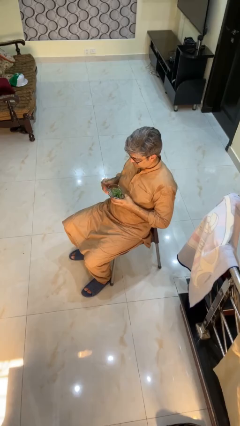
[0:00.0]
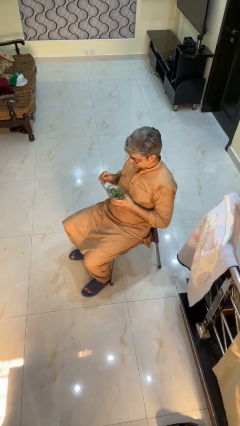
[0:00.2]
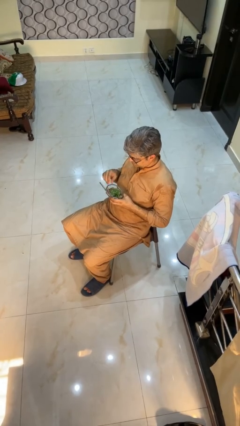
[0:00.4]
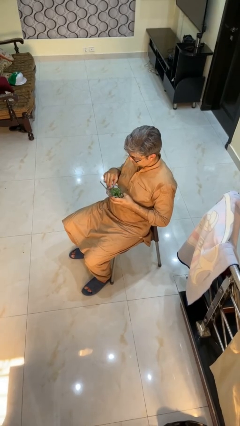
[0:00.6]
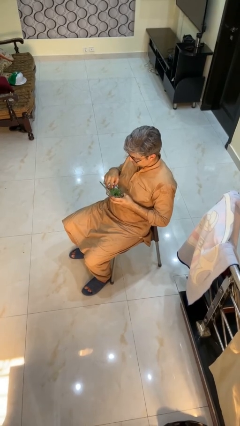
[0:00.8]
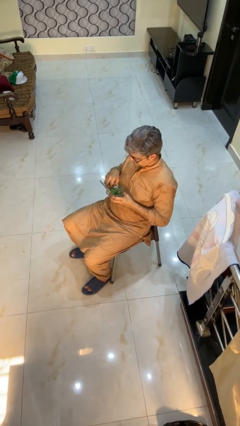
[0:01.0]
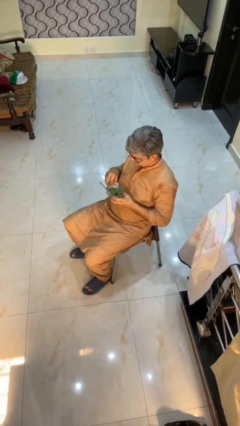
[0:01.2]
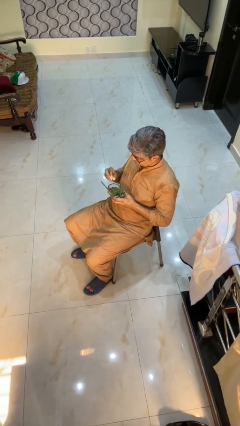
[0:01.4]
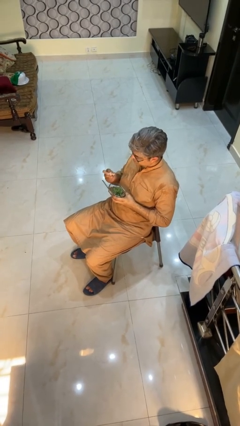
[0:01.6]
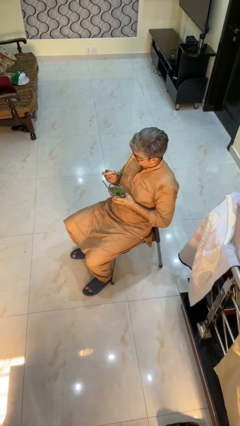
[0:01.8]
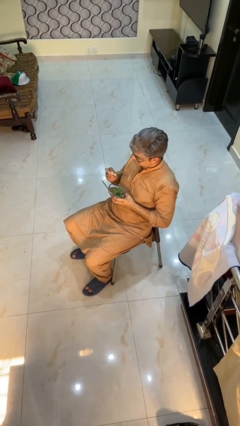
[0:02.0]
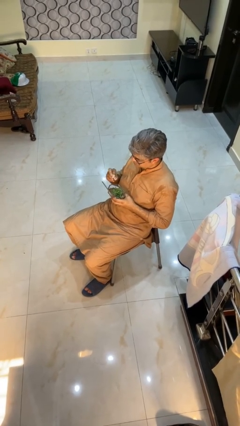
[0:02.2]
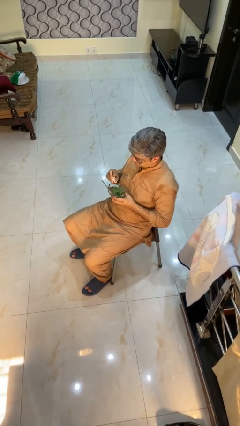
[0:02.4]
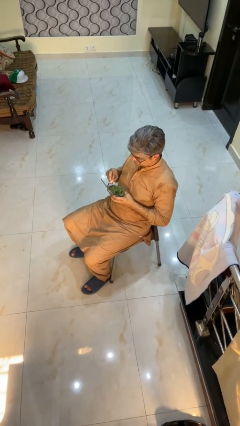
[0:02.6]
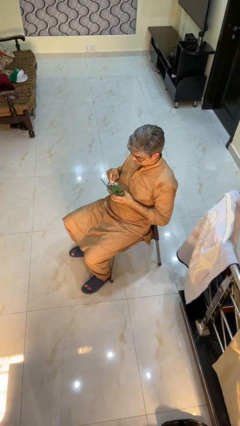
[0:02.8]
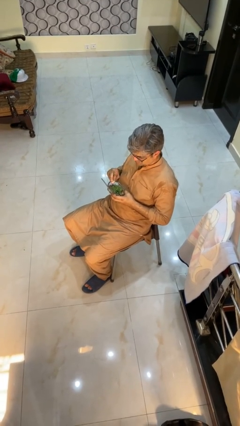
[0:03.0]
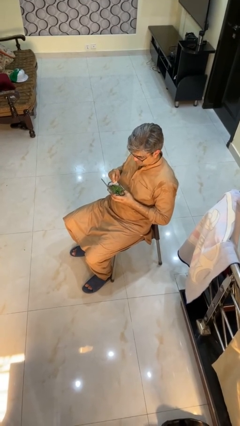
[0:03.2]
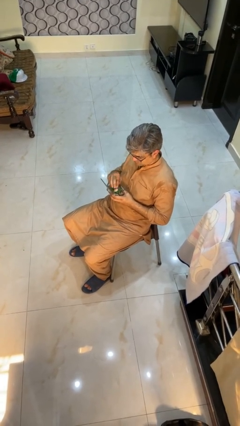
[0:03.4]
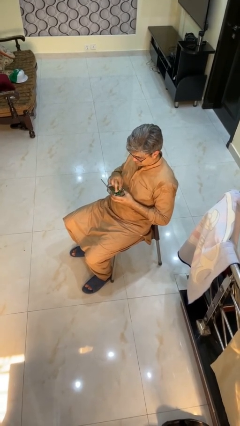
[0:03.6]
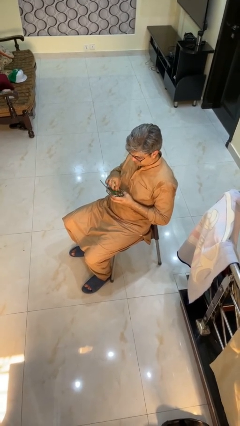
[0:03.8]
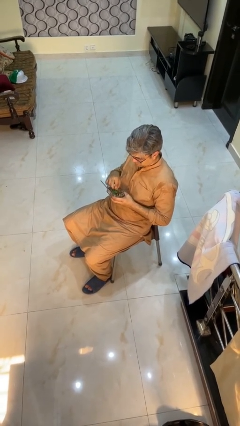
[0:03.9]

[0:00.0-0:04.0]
person searches jewelry box

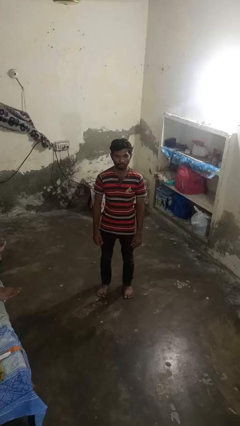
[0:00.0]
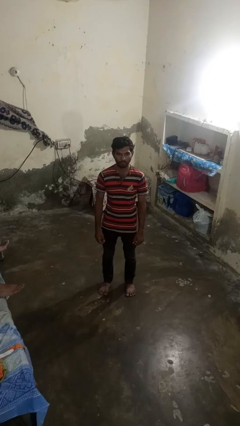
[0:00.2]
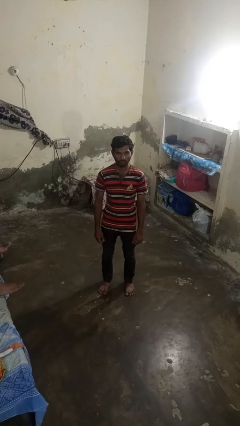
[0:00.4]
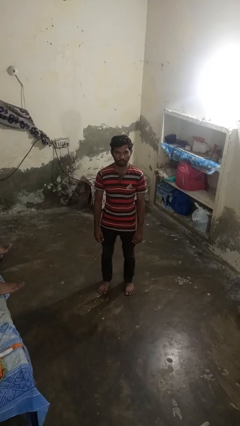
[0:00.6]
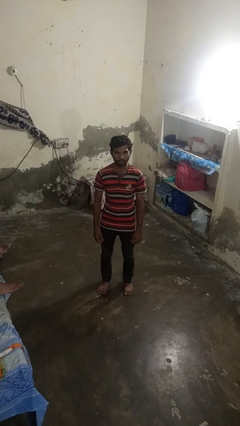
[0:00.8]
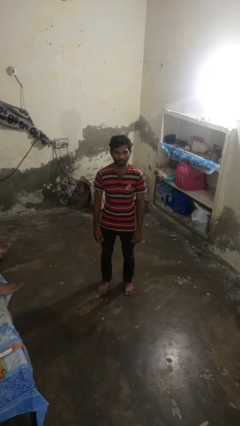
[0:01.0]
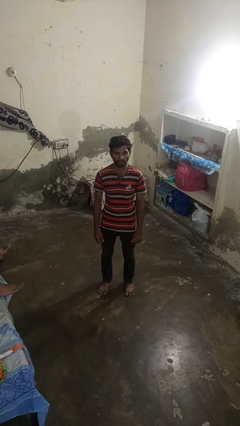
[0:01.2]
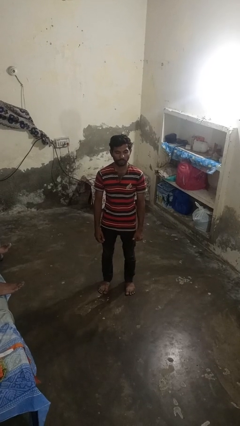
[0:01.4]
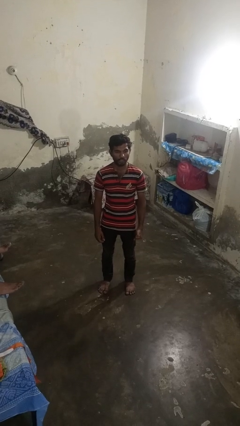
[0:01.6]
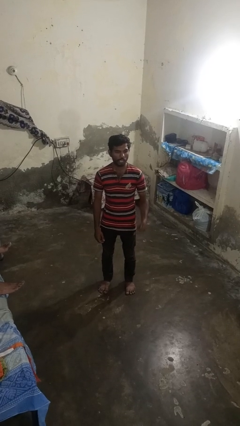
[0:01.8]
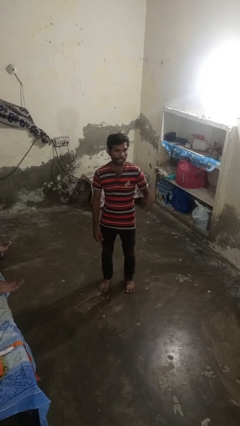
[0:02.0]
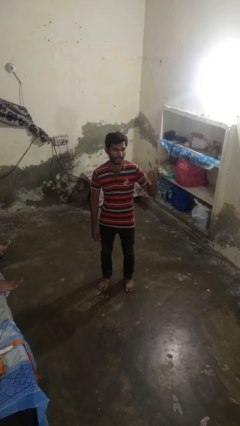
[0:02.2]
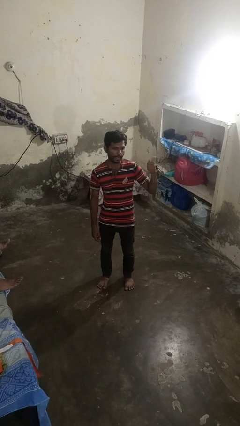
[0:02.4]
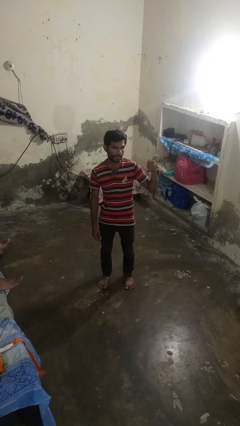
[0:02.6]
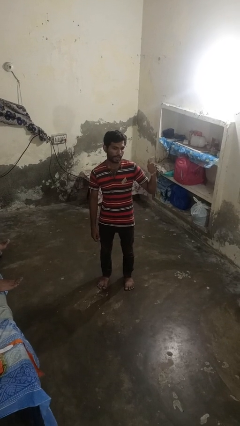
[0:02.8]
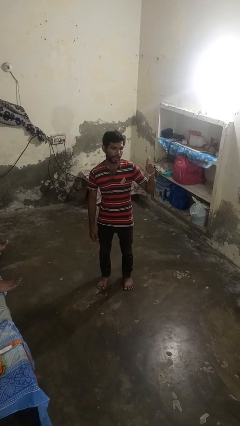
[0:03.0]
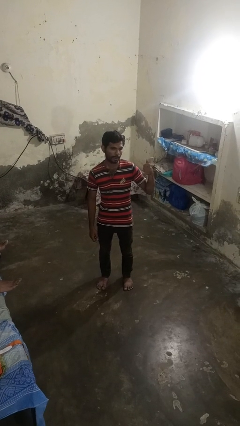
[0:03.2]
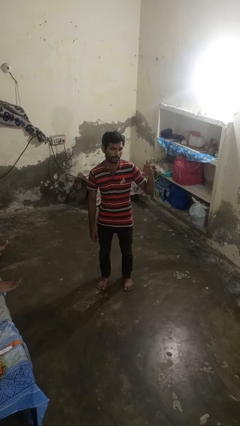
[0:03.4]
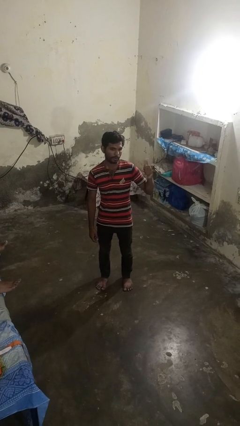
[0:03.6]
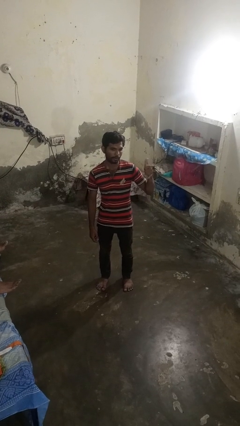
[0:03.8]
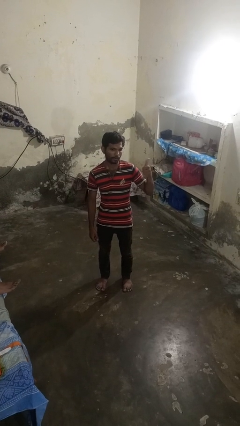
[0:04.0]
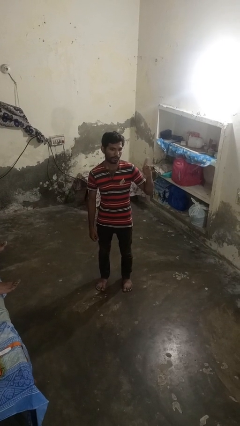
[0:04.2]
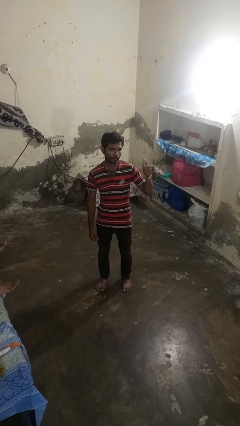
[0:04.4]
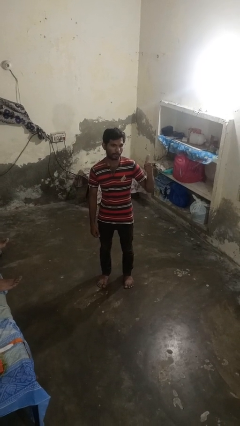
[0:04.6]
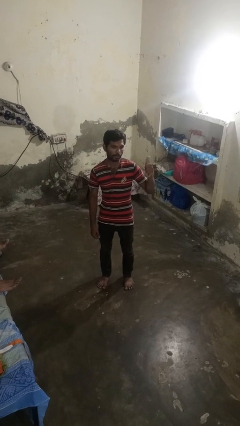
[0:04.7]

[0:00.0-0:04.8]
person gestures hang loose

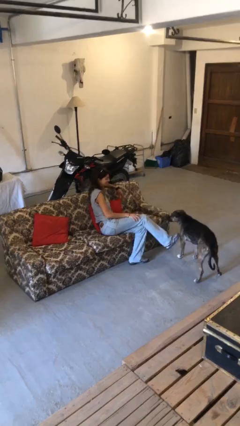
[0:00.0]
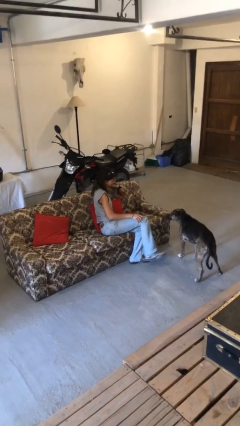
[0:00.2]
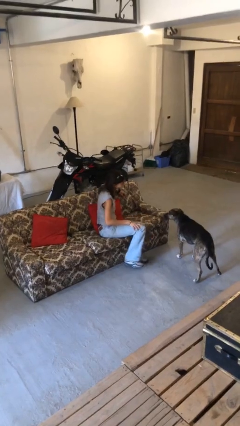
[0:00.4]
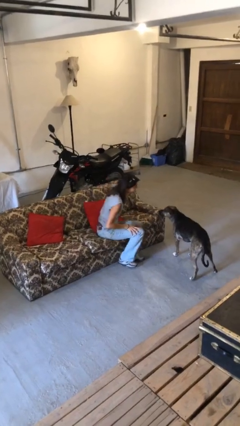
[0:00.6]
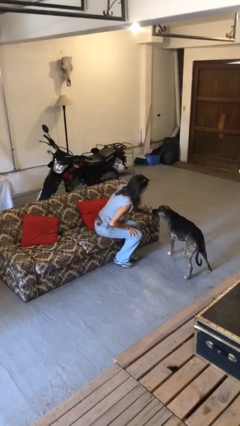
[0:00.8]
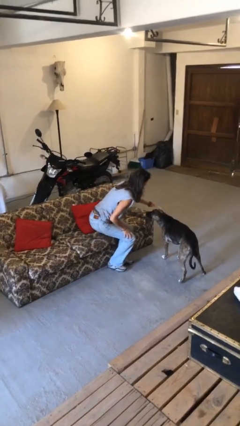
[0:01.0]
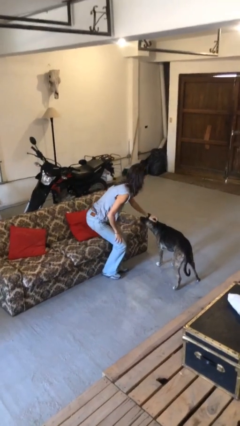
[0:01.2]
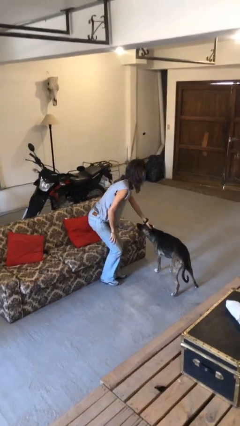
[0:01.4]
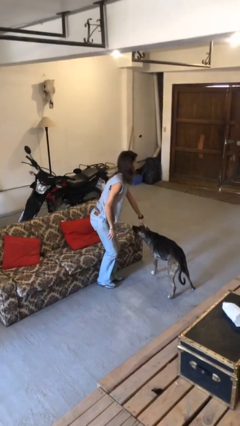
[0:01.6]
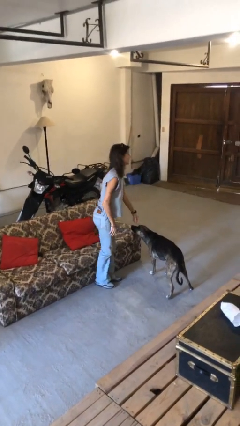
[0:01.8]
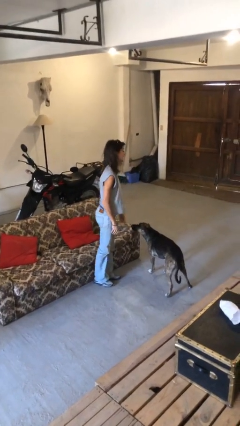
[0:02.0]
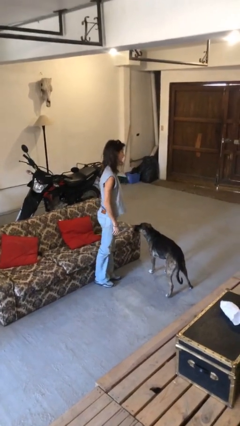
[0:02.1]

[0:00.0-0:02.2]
person stands up

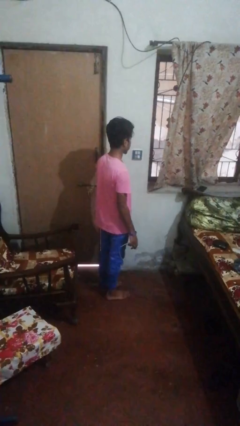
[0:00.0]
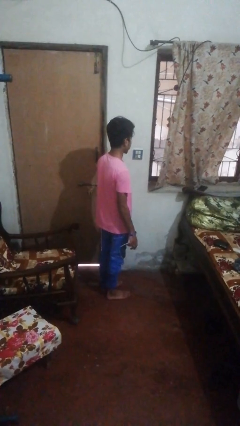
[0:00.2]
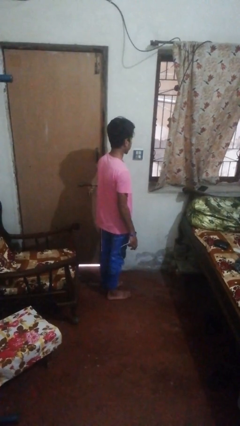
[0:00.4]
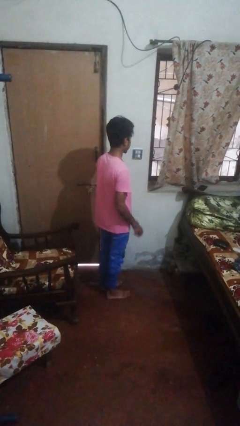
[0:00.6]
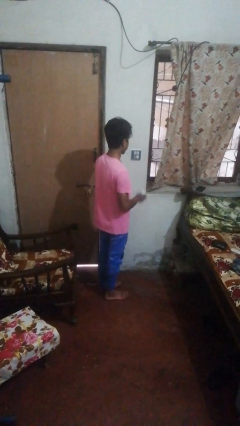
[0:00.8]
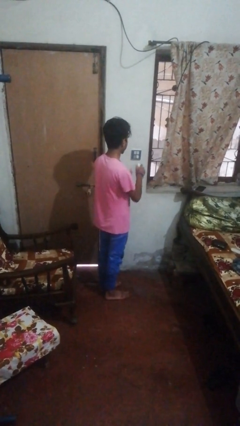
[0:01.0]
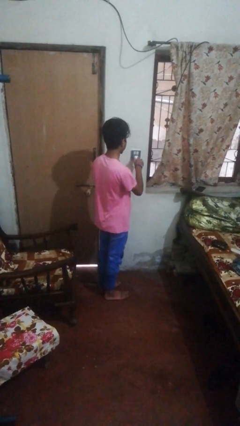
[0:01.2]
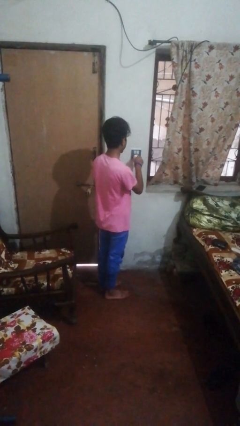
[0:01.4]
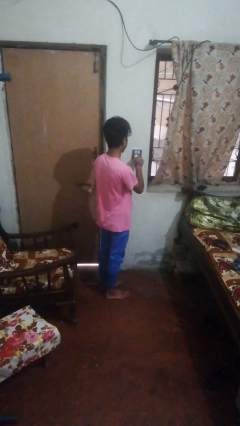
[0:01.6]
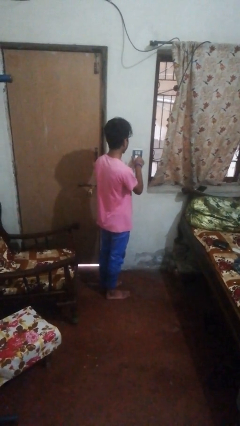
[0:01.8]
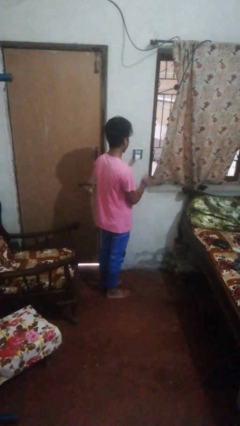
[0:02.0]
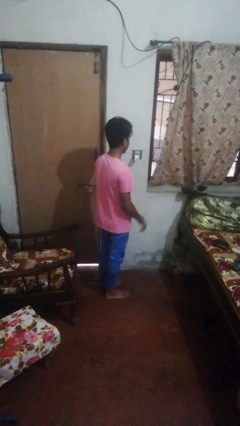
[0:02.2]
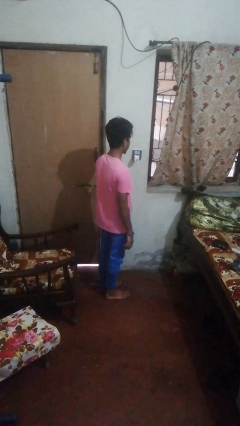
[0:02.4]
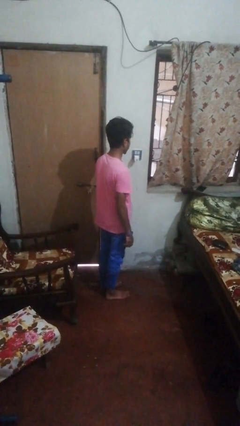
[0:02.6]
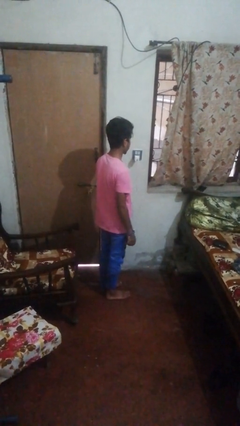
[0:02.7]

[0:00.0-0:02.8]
person plugs into electrical socket

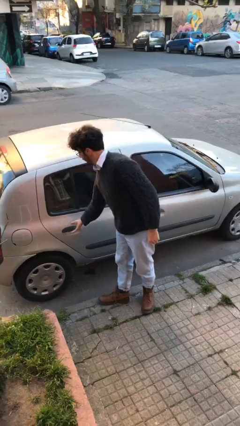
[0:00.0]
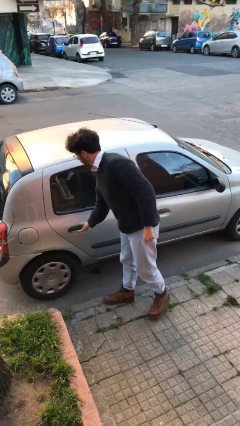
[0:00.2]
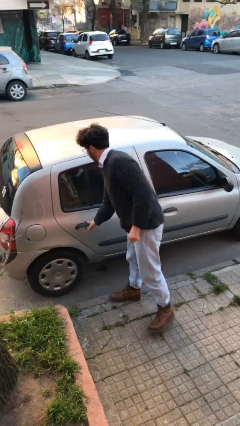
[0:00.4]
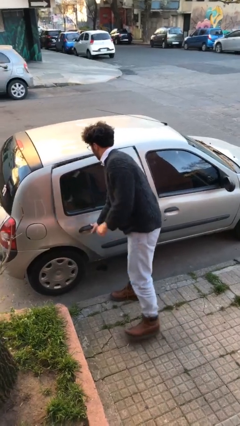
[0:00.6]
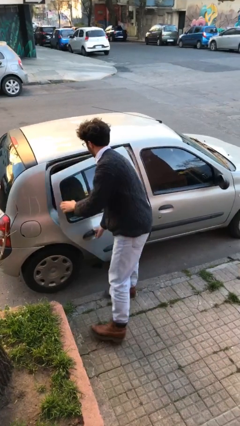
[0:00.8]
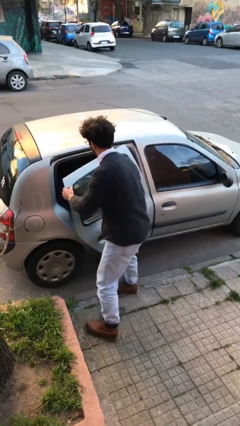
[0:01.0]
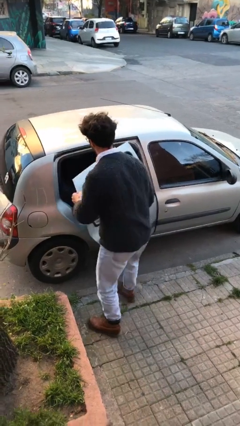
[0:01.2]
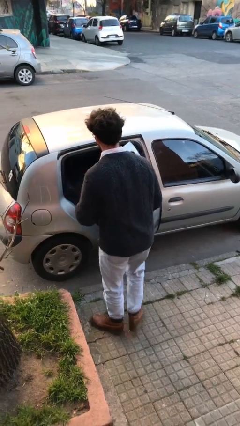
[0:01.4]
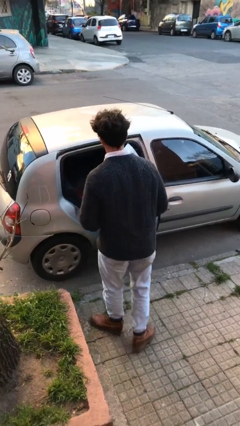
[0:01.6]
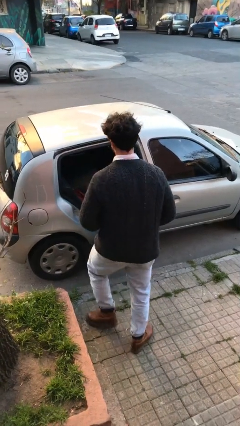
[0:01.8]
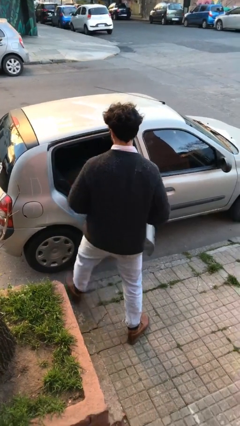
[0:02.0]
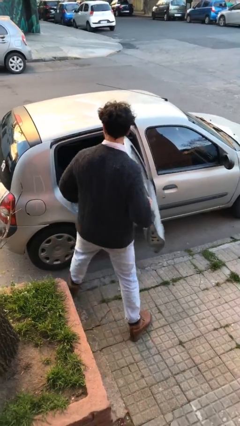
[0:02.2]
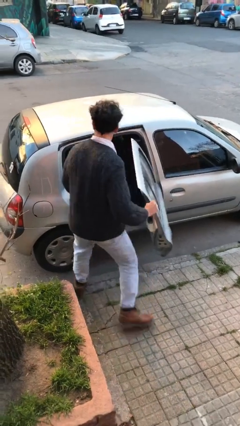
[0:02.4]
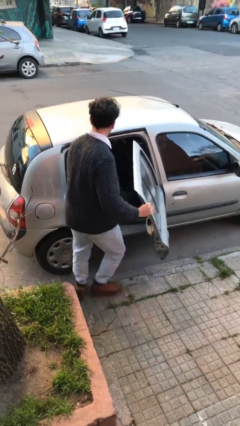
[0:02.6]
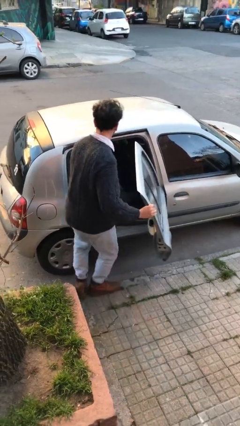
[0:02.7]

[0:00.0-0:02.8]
person opens car door

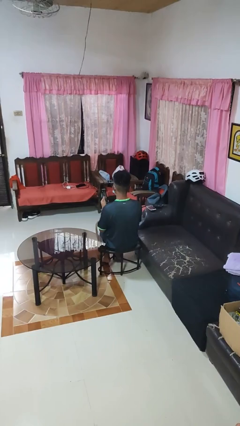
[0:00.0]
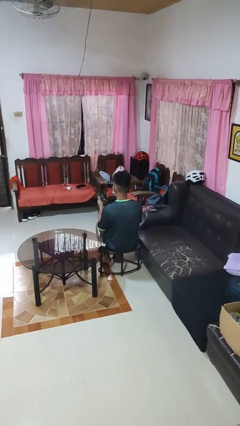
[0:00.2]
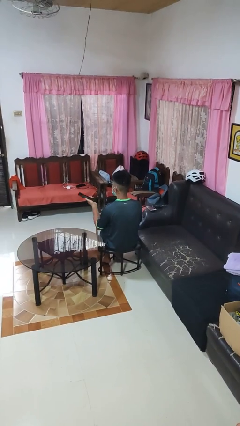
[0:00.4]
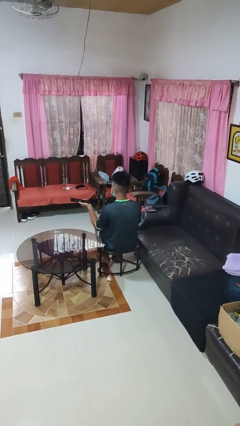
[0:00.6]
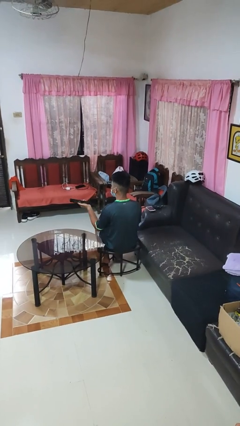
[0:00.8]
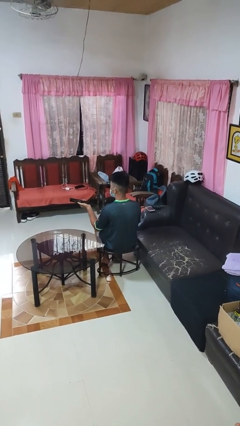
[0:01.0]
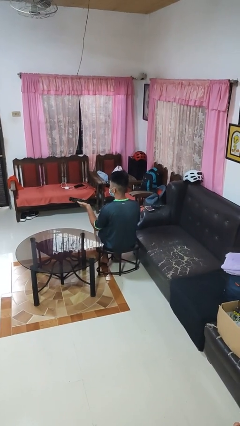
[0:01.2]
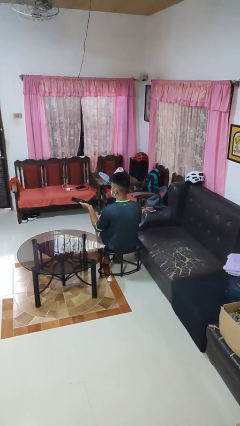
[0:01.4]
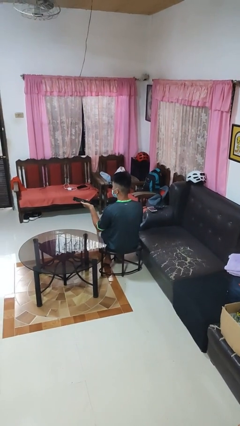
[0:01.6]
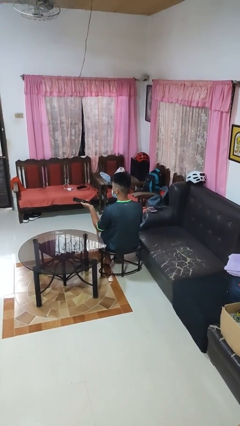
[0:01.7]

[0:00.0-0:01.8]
person uses television remote
